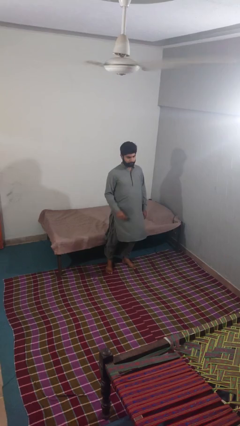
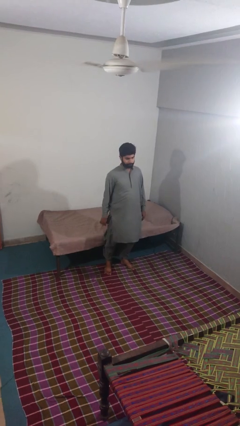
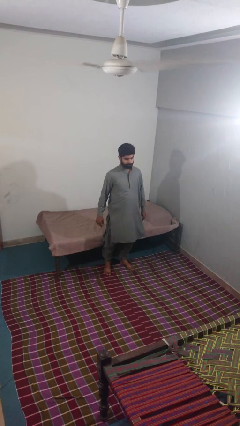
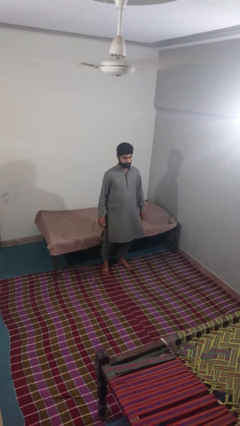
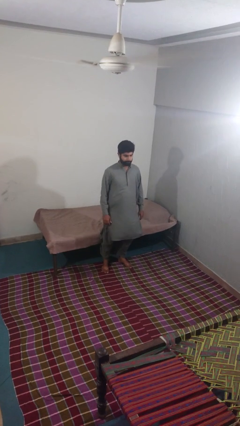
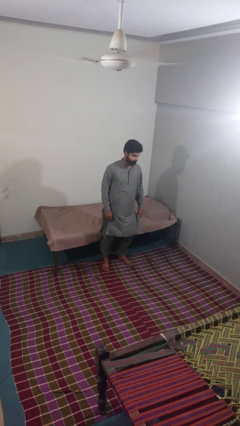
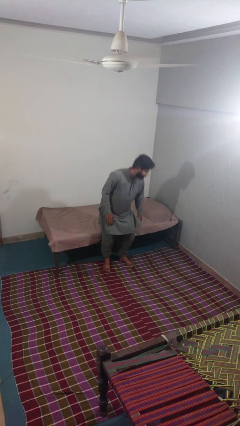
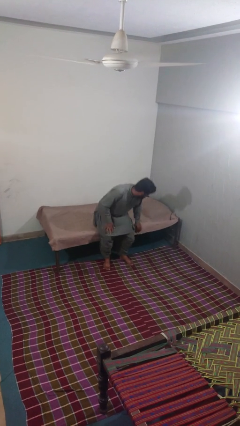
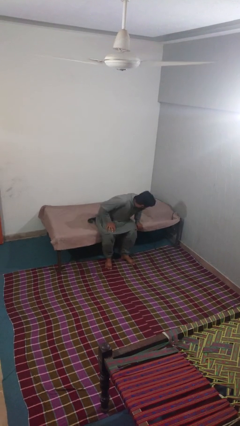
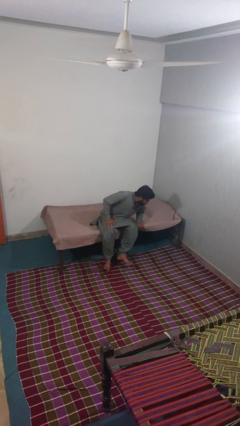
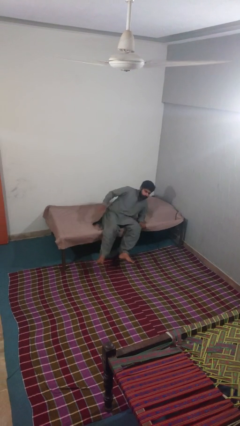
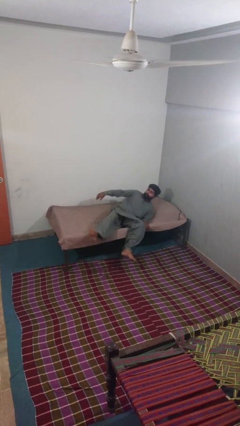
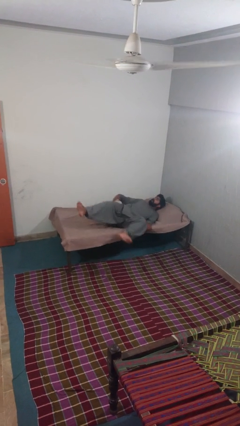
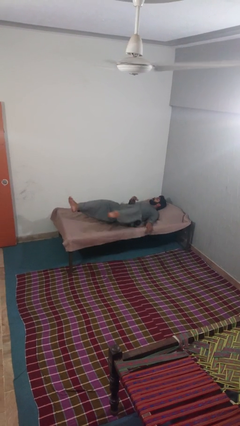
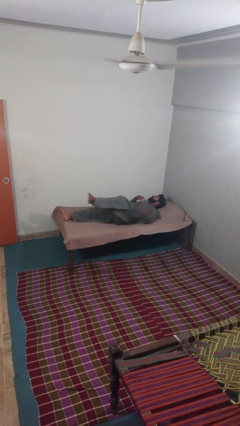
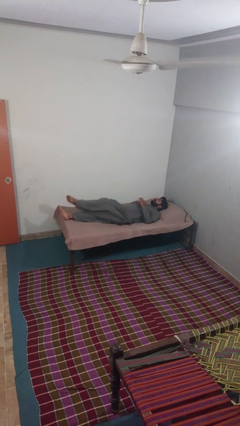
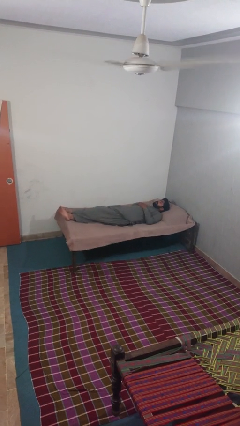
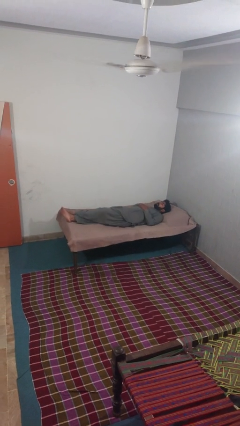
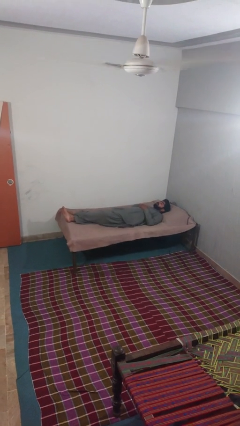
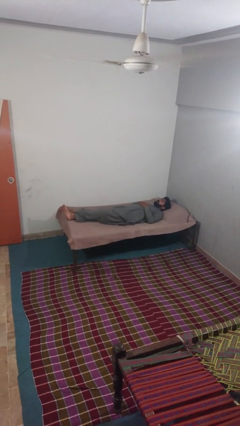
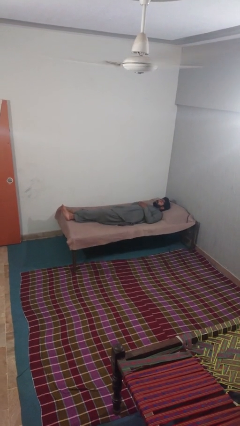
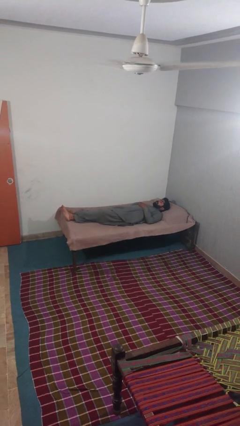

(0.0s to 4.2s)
person lies down on bed

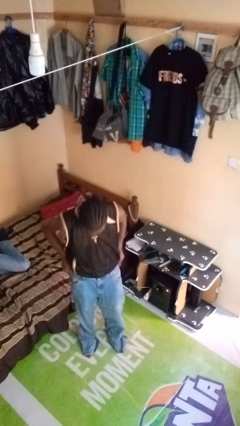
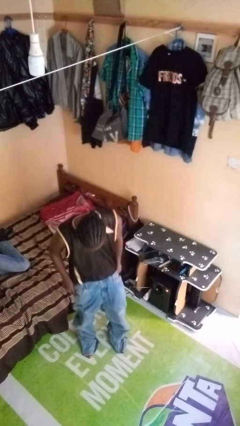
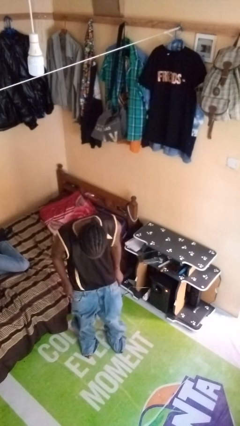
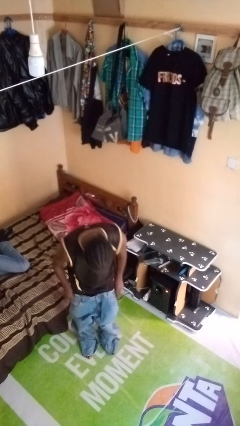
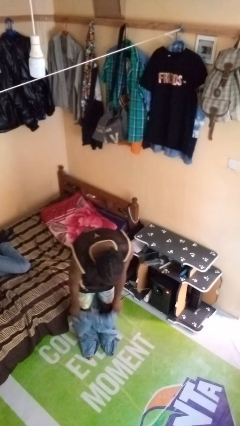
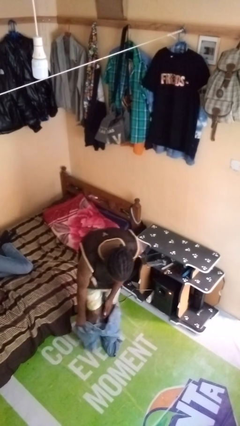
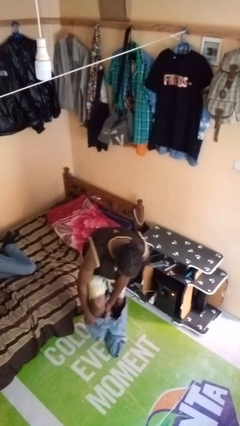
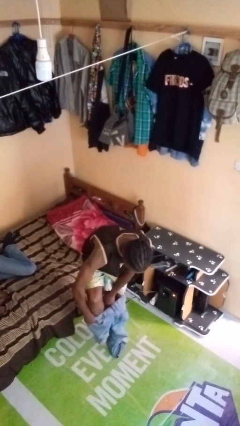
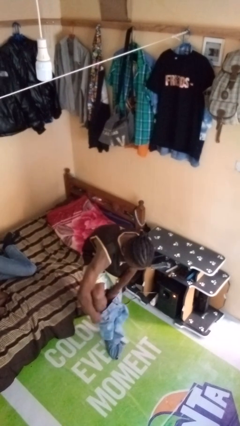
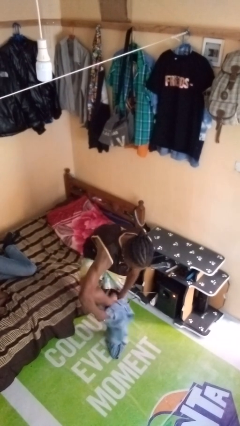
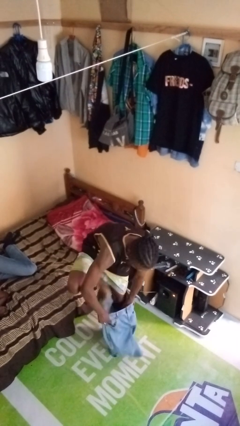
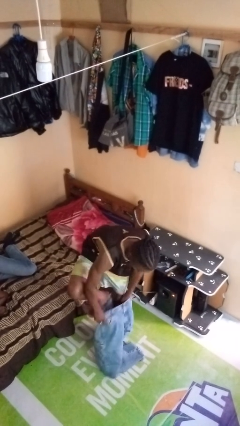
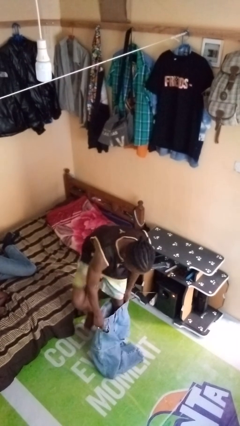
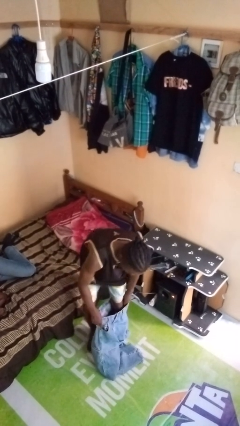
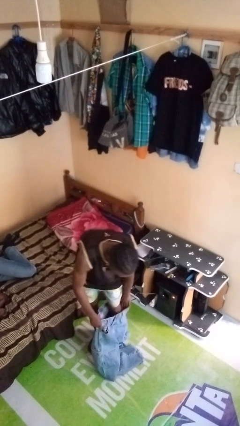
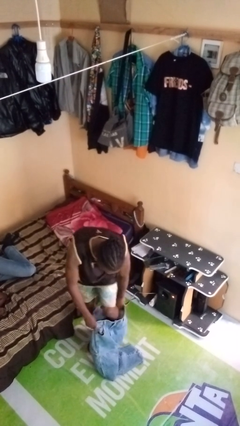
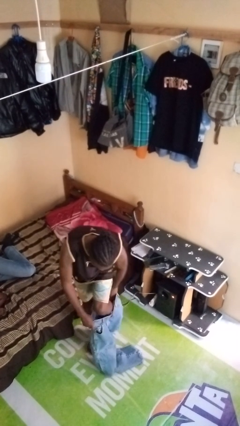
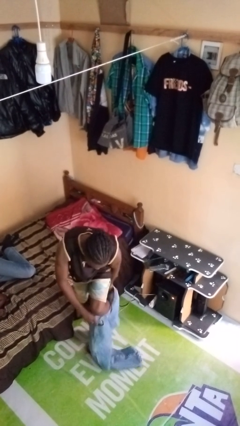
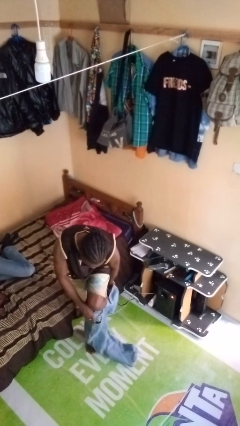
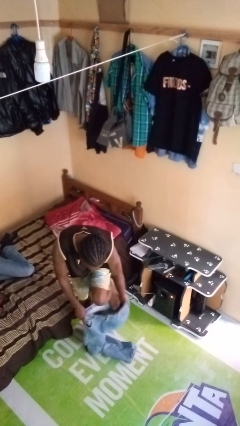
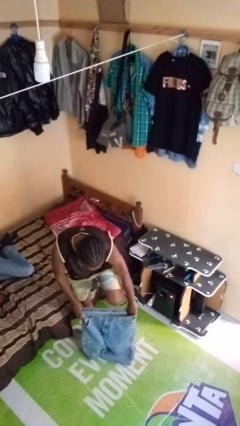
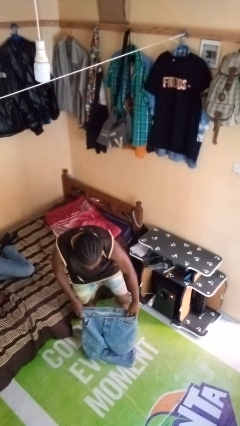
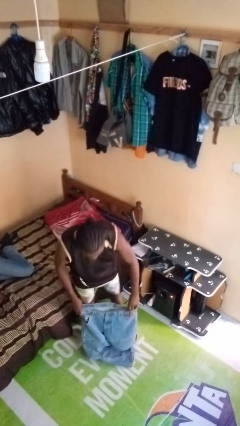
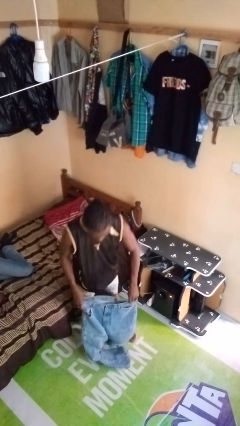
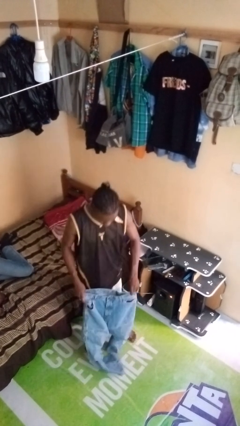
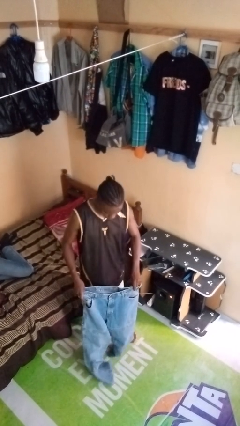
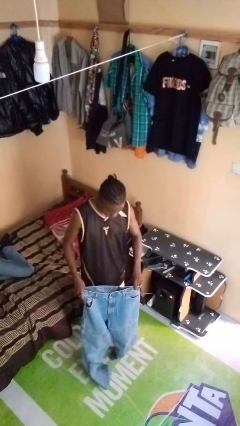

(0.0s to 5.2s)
person takes off pants

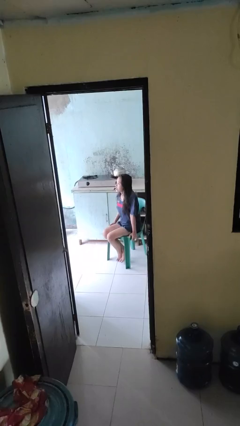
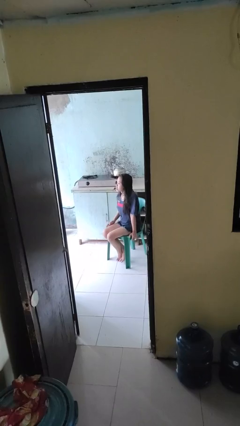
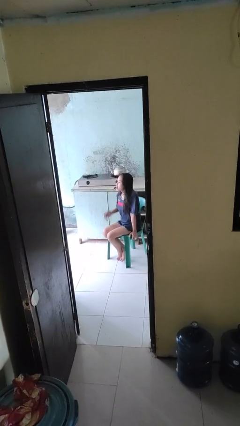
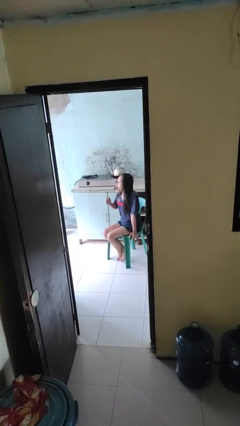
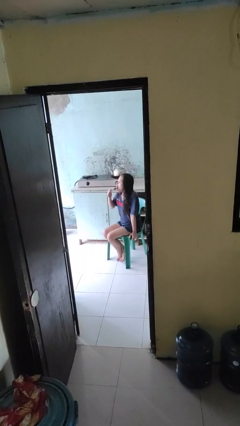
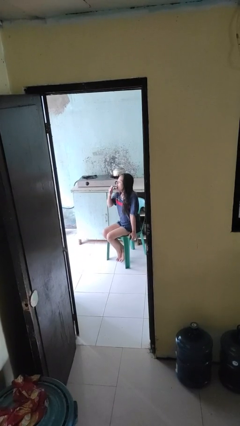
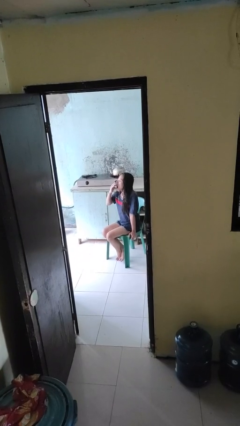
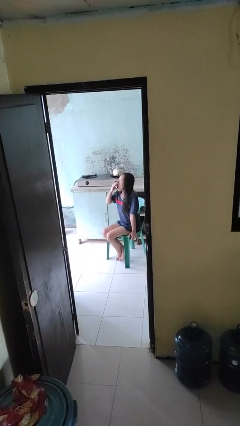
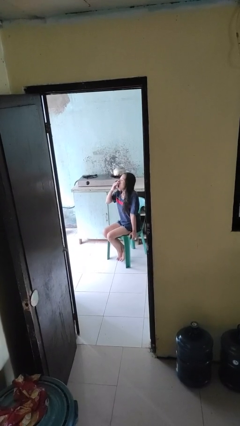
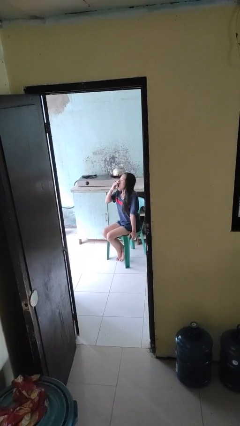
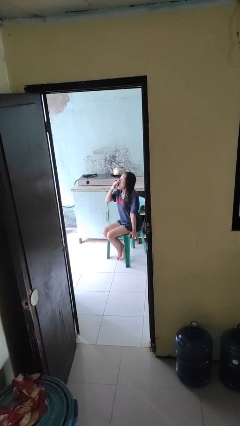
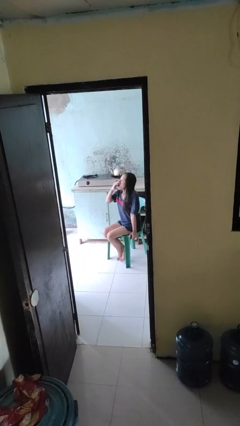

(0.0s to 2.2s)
person yawns

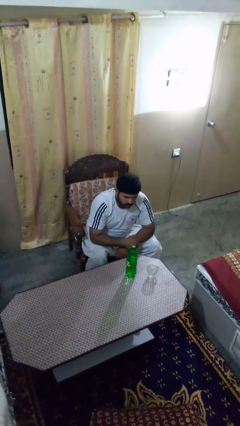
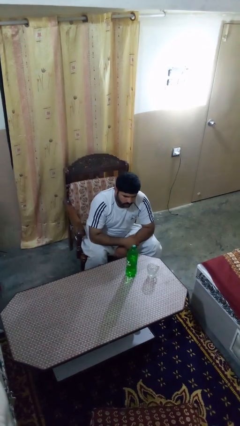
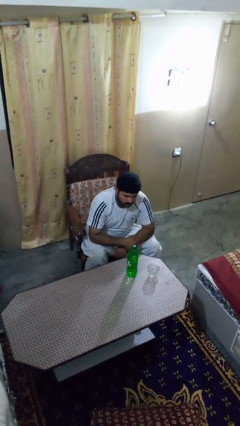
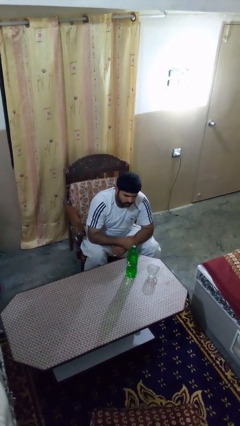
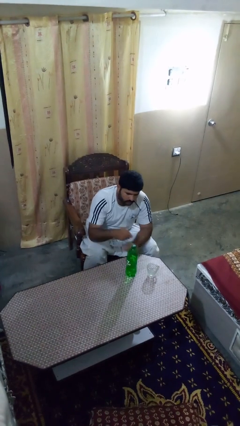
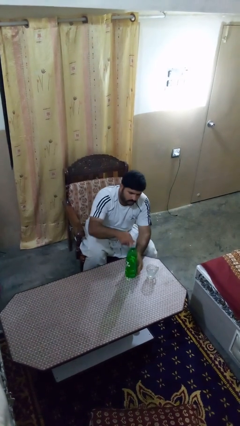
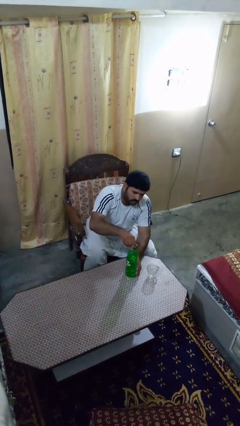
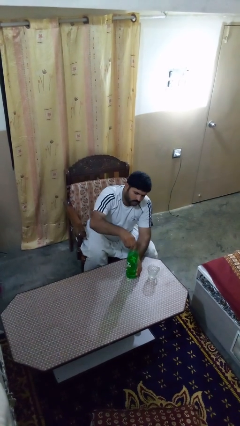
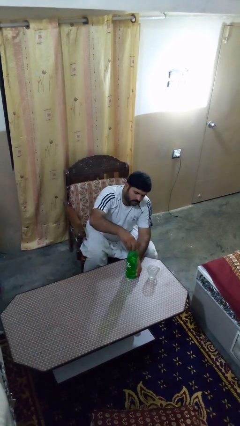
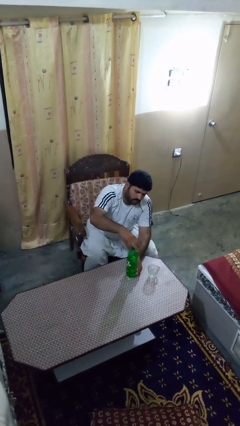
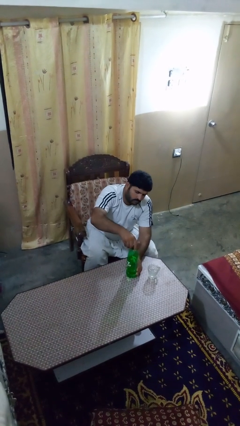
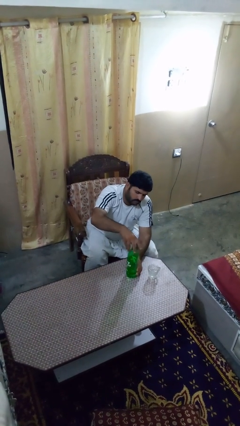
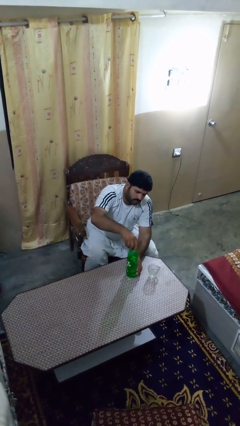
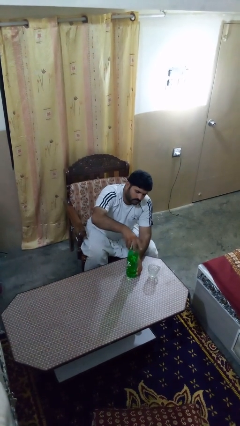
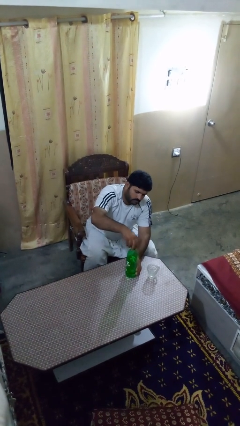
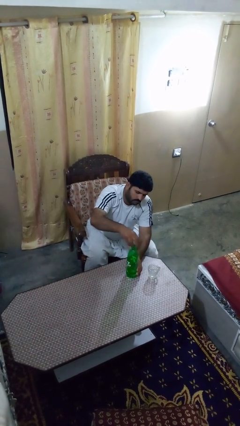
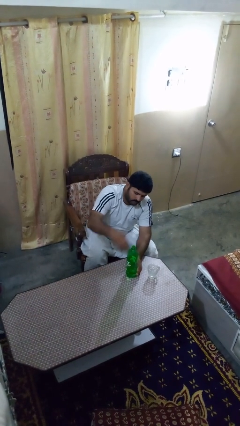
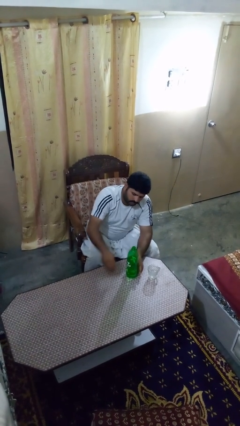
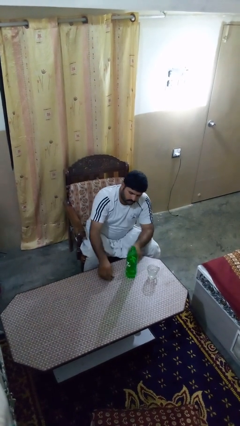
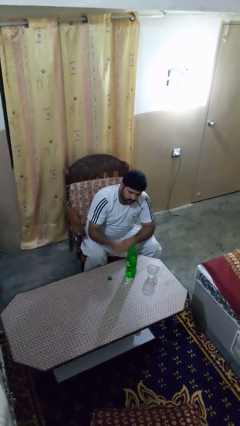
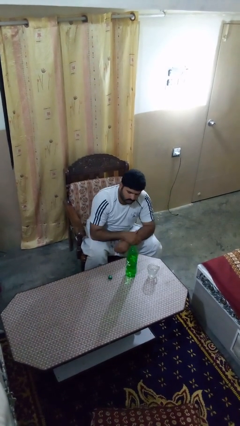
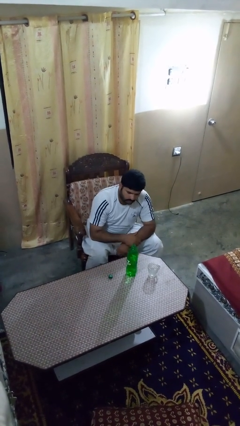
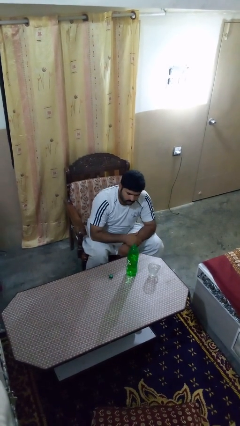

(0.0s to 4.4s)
person unscrews lid from bottle

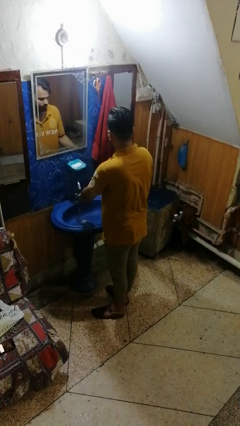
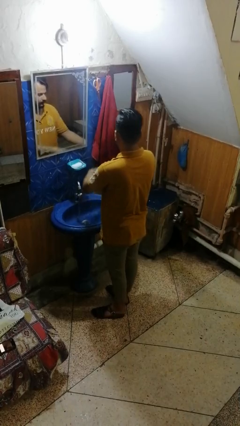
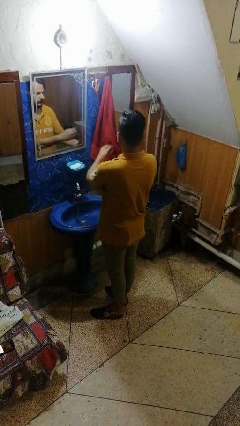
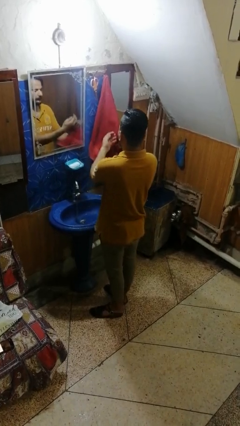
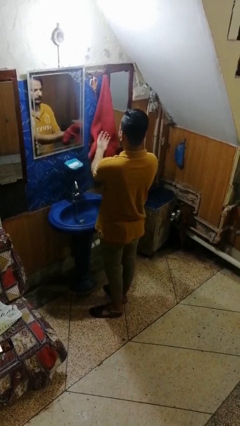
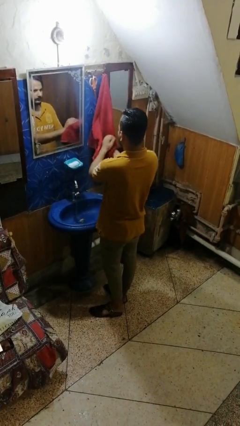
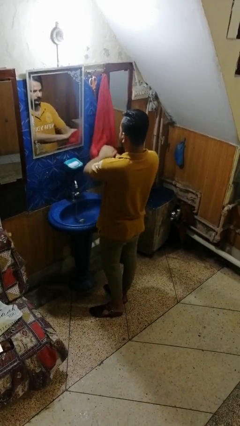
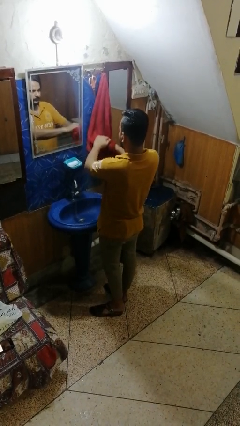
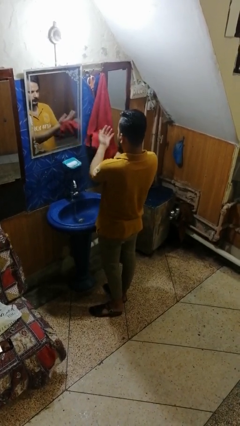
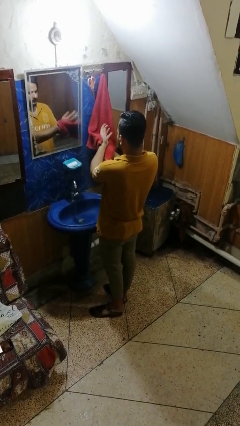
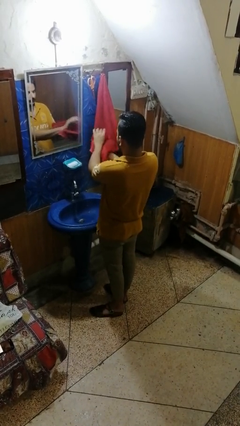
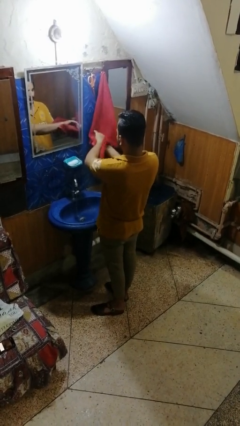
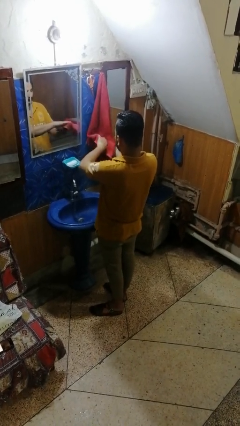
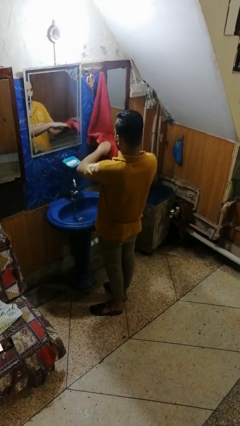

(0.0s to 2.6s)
person dries hands with towel
